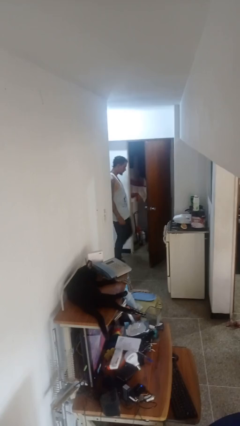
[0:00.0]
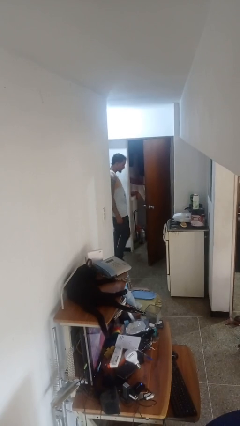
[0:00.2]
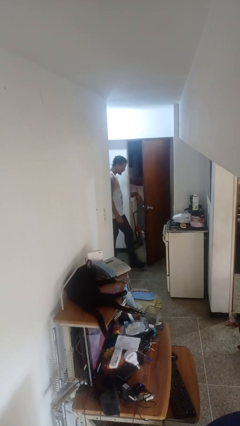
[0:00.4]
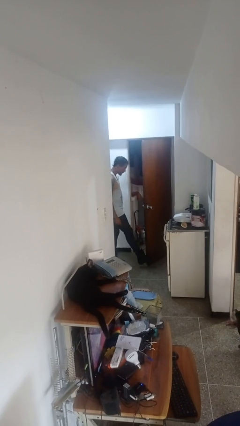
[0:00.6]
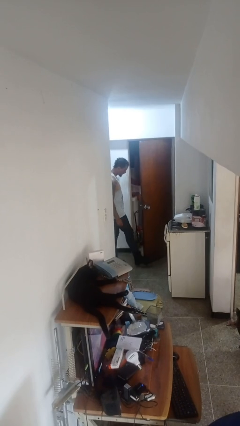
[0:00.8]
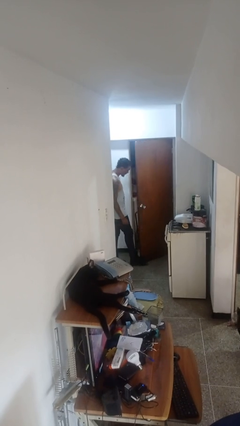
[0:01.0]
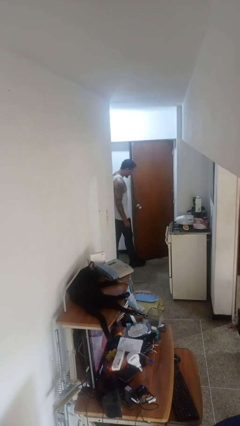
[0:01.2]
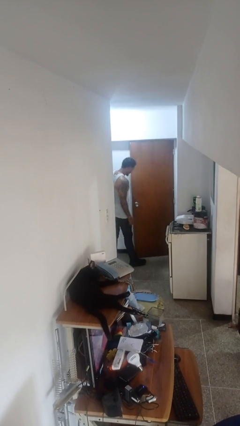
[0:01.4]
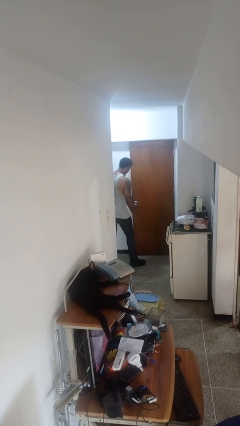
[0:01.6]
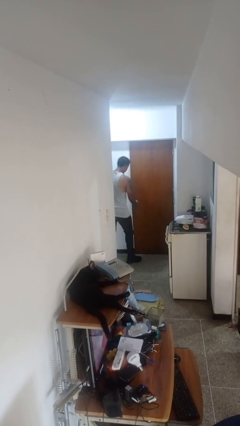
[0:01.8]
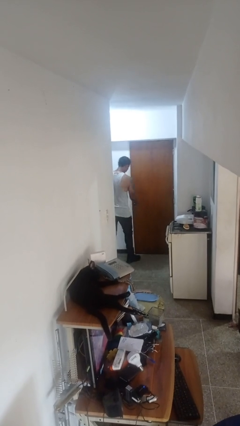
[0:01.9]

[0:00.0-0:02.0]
person closes door with foot

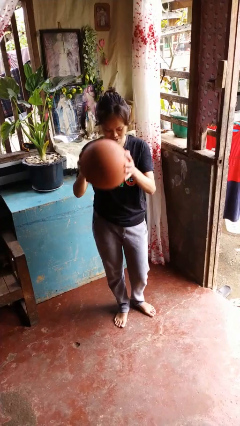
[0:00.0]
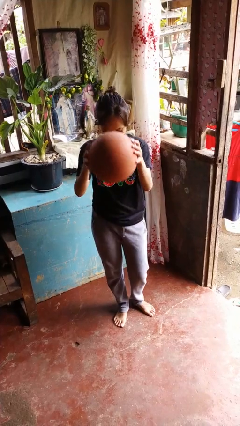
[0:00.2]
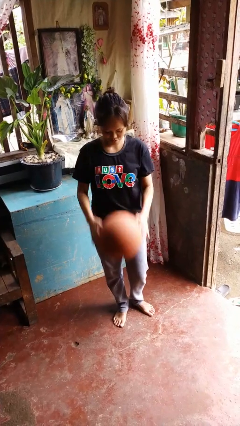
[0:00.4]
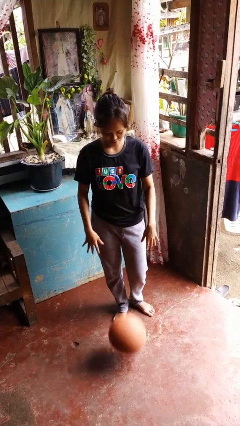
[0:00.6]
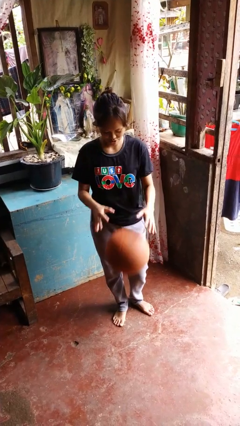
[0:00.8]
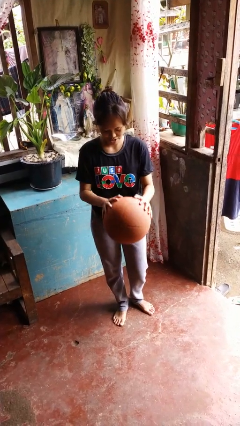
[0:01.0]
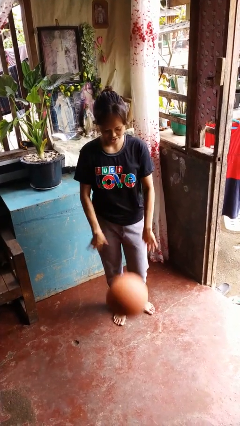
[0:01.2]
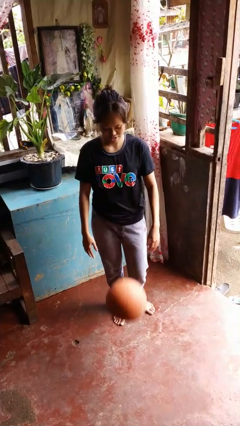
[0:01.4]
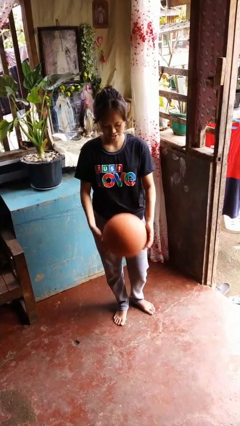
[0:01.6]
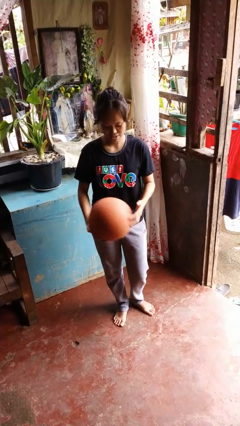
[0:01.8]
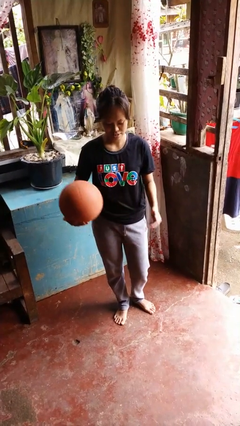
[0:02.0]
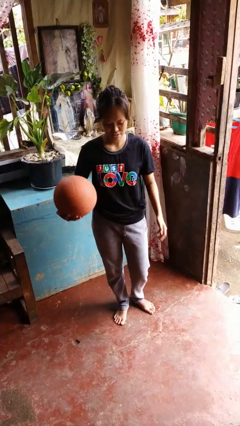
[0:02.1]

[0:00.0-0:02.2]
person bounces ball on floor

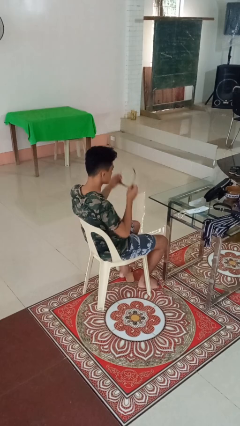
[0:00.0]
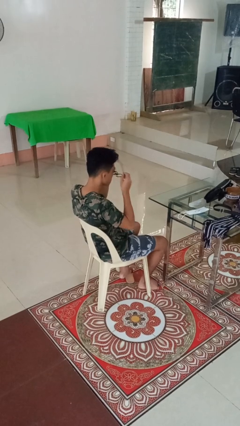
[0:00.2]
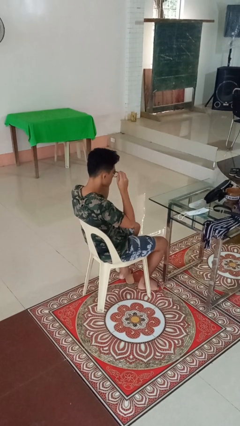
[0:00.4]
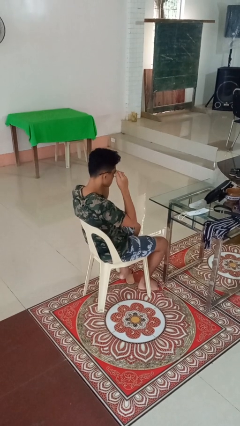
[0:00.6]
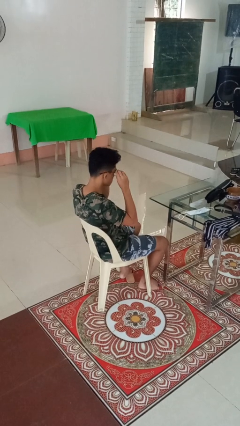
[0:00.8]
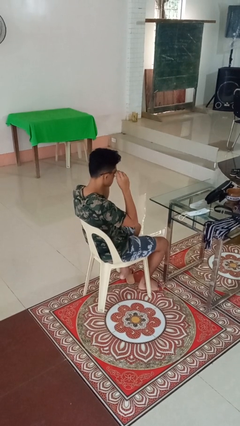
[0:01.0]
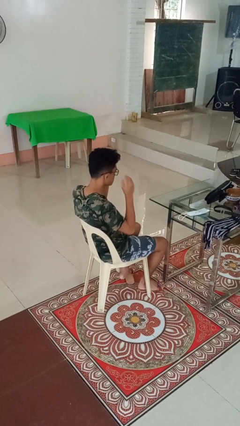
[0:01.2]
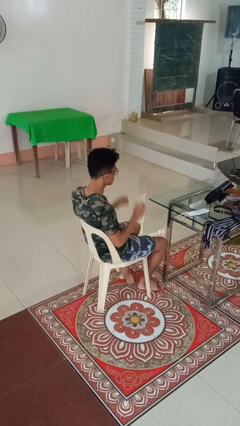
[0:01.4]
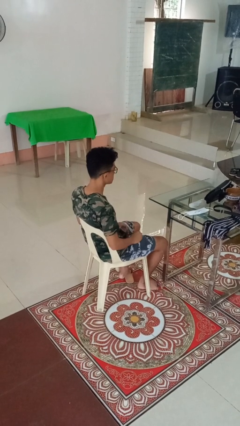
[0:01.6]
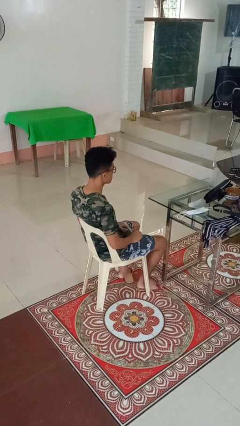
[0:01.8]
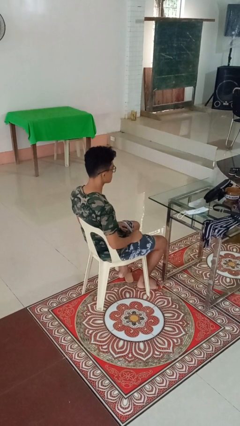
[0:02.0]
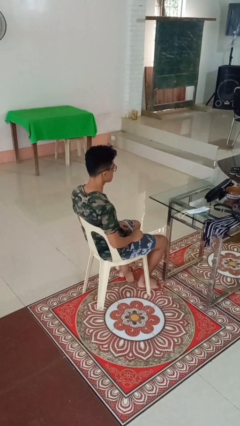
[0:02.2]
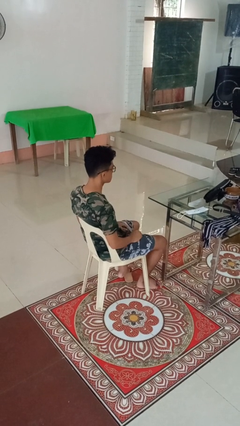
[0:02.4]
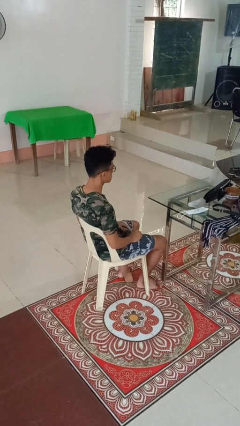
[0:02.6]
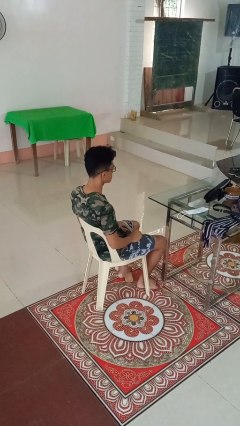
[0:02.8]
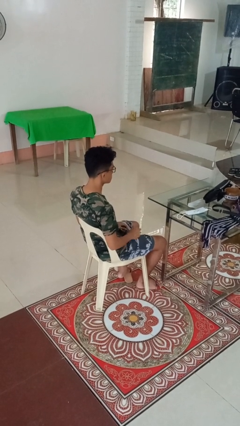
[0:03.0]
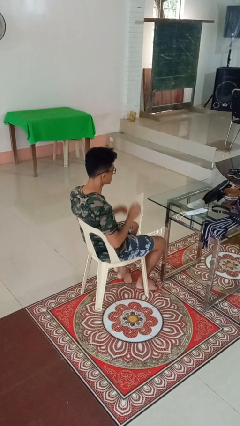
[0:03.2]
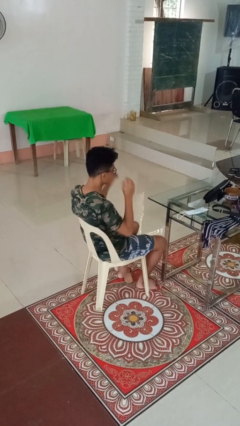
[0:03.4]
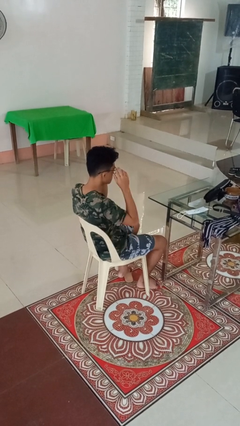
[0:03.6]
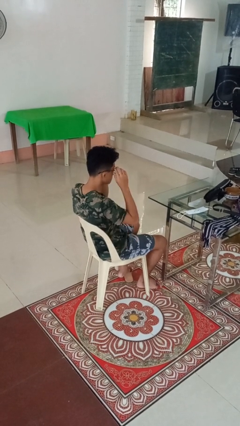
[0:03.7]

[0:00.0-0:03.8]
person puts on glasses

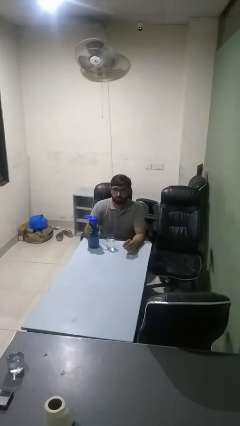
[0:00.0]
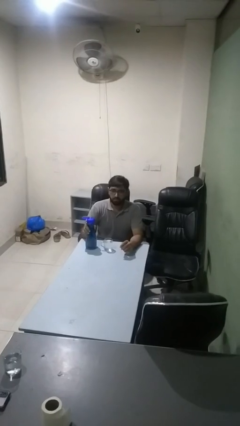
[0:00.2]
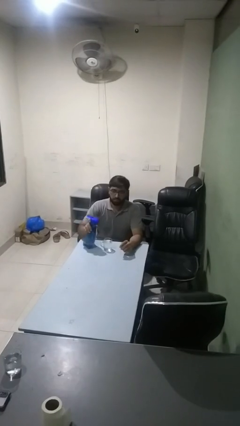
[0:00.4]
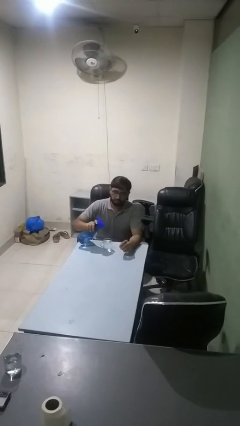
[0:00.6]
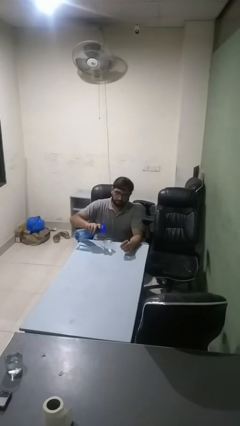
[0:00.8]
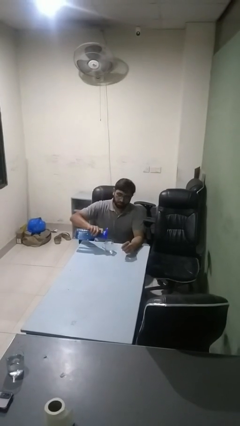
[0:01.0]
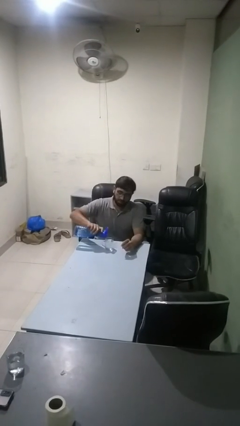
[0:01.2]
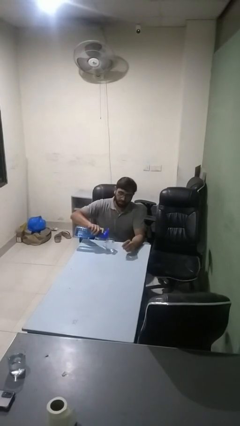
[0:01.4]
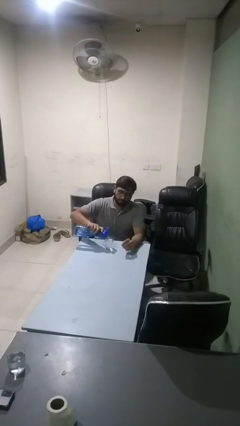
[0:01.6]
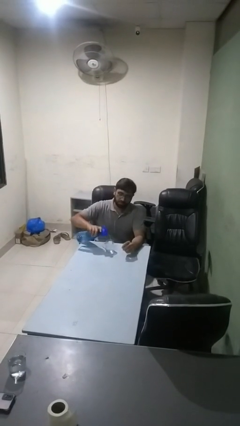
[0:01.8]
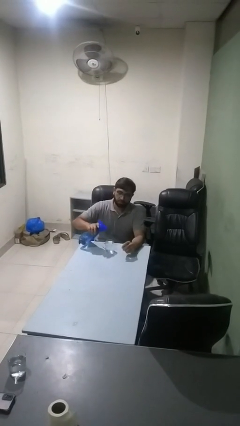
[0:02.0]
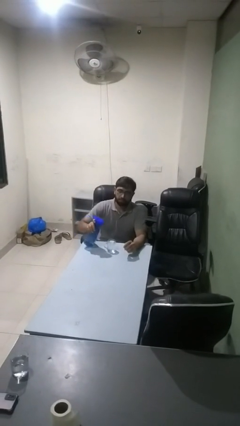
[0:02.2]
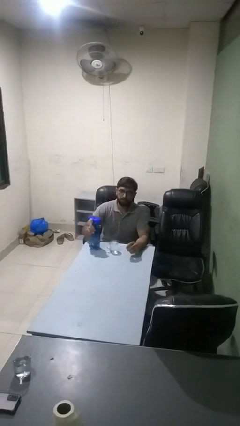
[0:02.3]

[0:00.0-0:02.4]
person pours liquid into cup

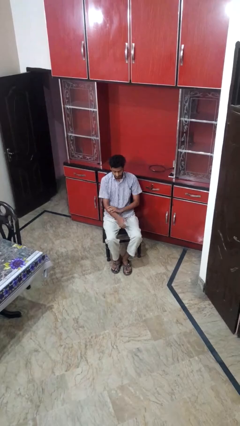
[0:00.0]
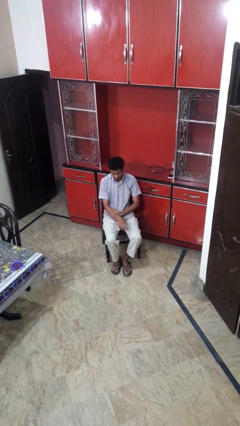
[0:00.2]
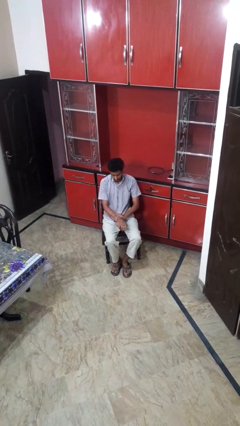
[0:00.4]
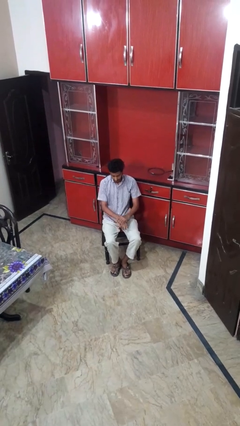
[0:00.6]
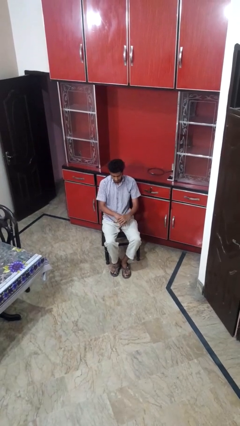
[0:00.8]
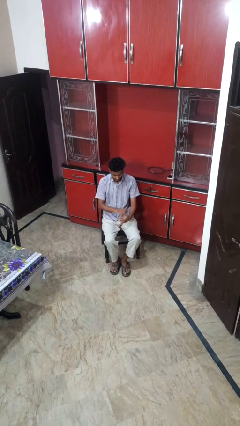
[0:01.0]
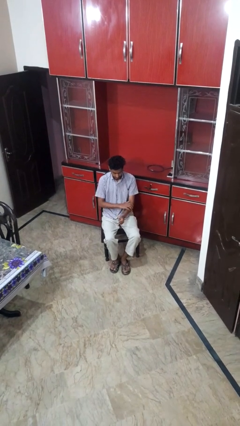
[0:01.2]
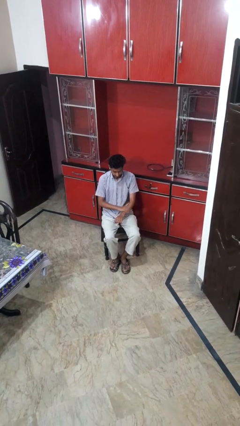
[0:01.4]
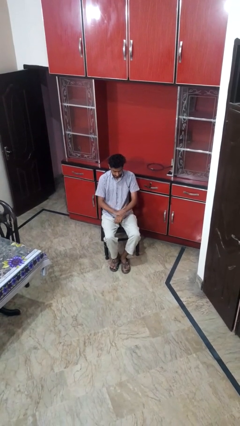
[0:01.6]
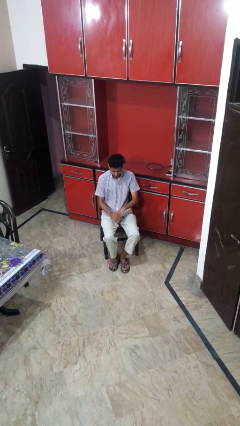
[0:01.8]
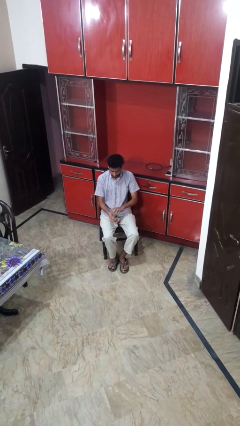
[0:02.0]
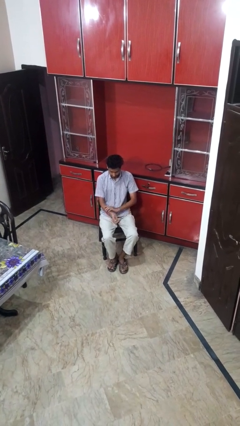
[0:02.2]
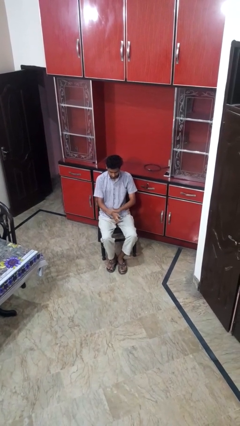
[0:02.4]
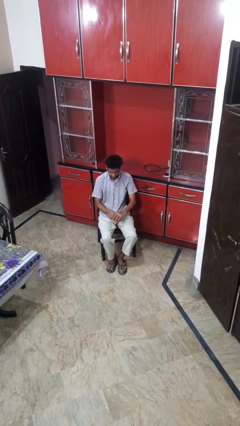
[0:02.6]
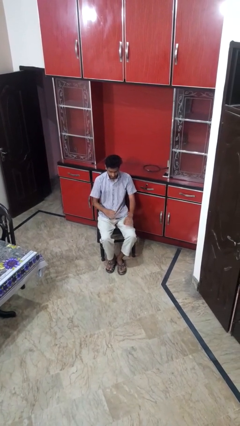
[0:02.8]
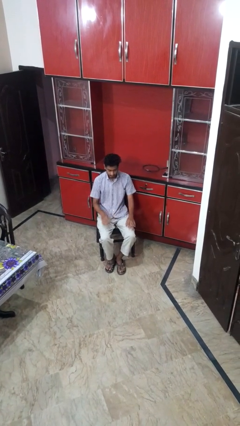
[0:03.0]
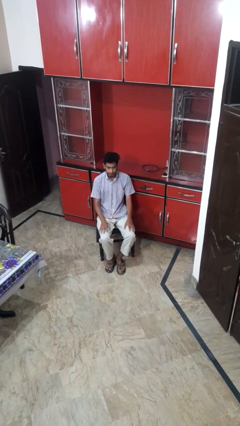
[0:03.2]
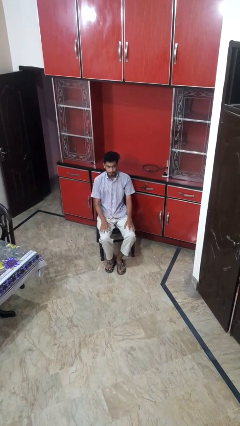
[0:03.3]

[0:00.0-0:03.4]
person looks at hands in lap

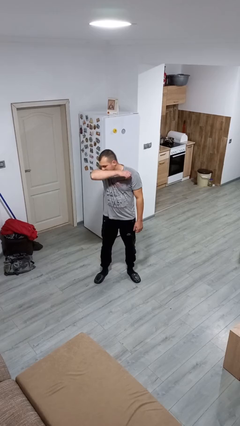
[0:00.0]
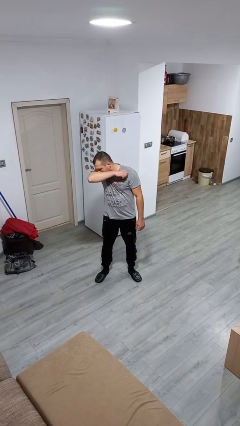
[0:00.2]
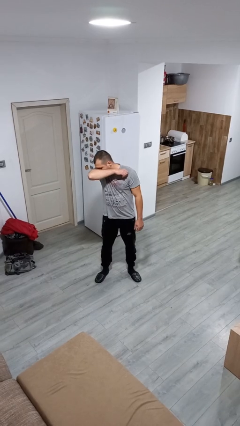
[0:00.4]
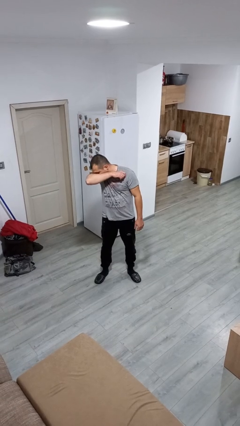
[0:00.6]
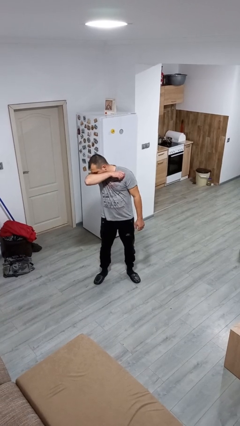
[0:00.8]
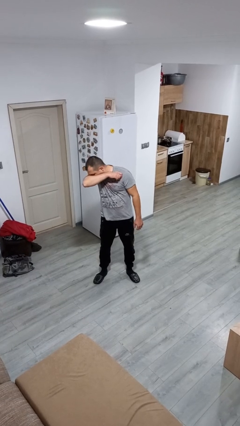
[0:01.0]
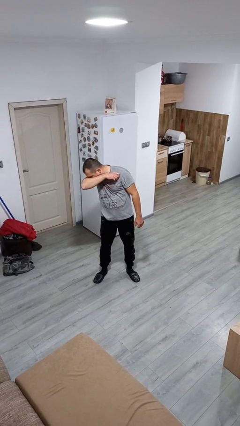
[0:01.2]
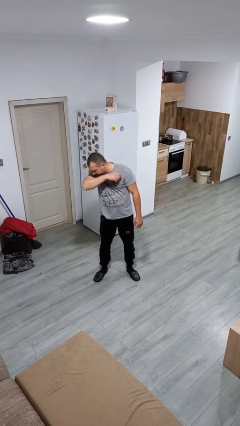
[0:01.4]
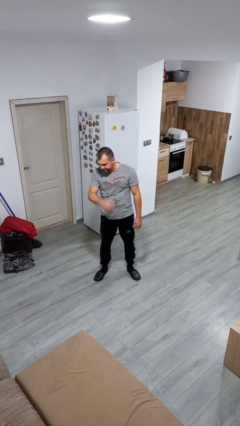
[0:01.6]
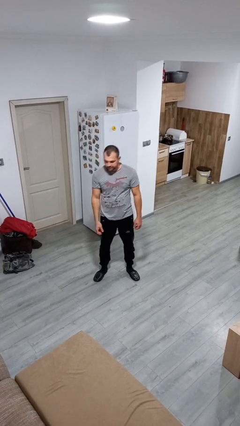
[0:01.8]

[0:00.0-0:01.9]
person sneezes into arm

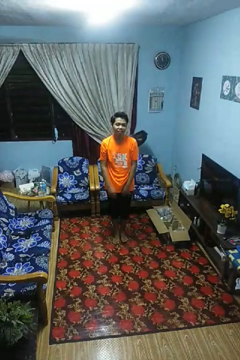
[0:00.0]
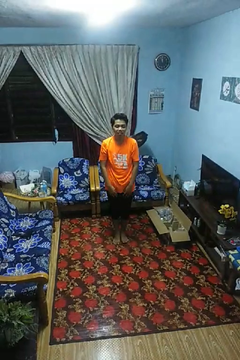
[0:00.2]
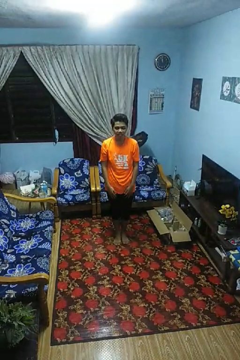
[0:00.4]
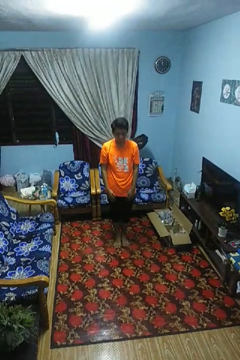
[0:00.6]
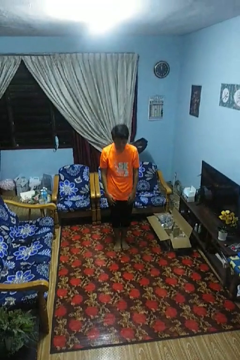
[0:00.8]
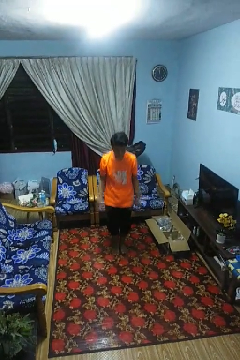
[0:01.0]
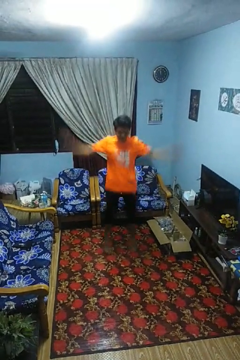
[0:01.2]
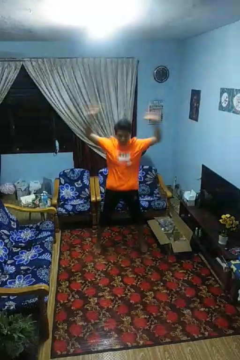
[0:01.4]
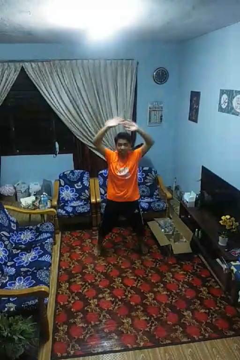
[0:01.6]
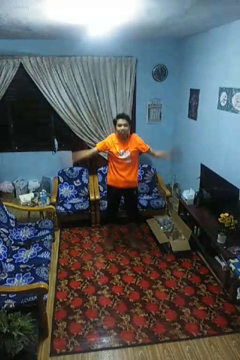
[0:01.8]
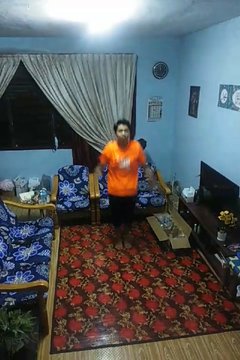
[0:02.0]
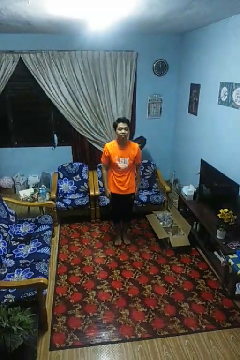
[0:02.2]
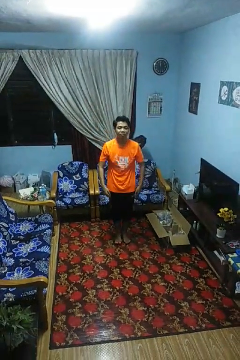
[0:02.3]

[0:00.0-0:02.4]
person exercises with jumping jacks
